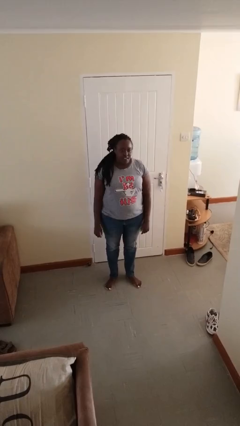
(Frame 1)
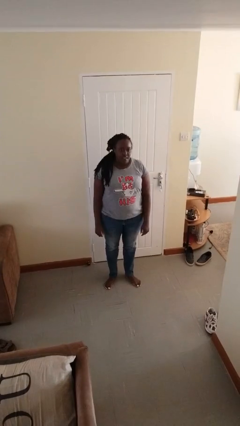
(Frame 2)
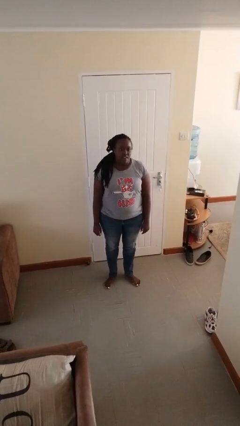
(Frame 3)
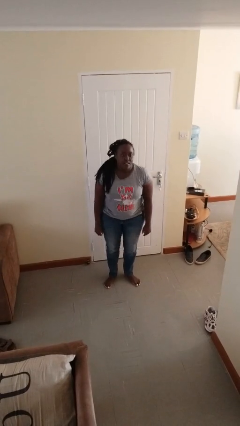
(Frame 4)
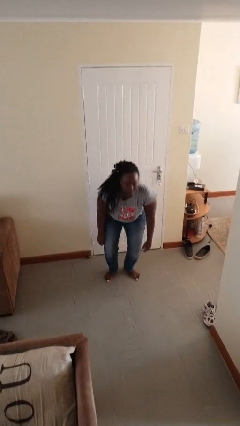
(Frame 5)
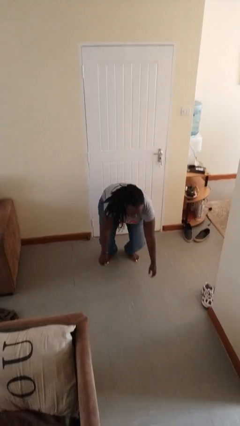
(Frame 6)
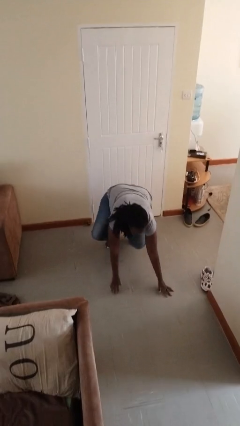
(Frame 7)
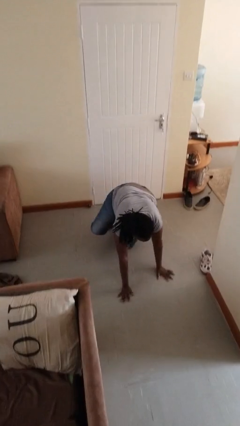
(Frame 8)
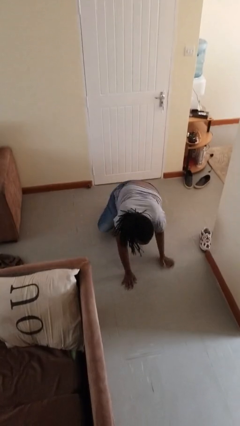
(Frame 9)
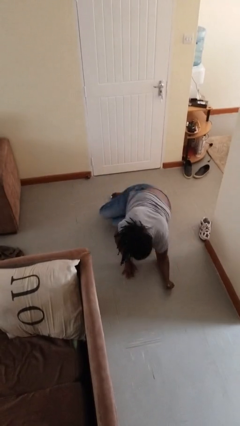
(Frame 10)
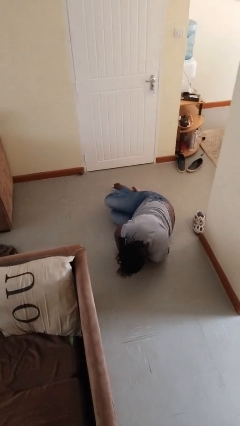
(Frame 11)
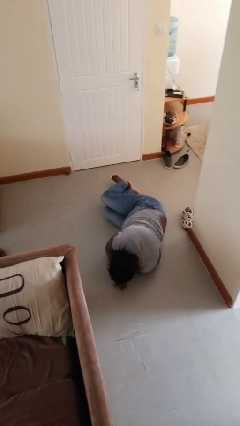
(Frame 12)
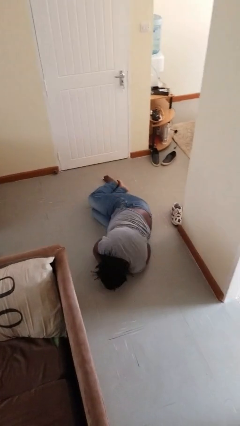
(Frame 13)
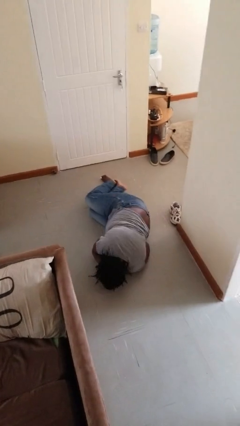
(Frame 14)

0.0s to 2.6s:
person falls while standing

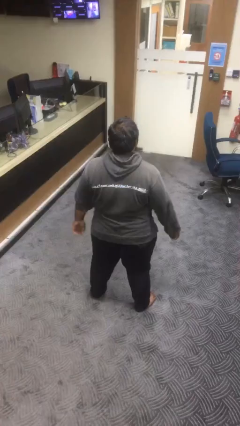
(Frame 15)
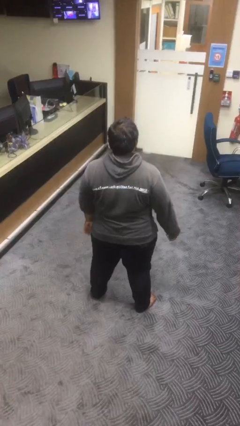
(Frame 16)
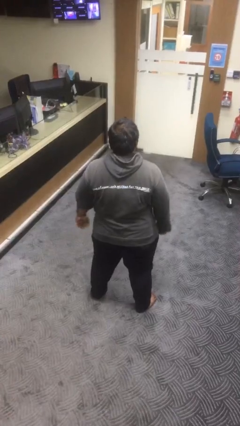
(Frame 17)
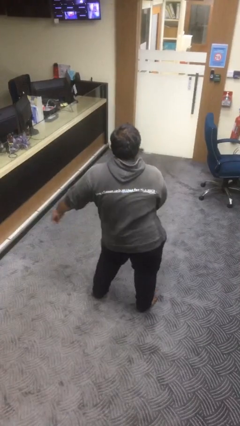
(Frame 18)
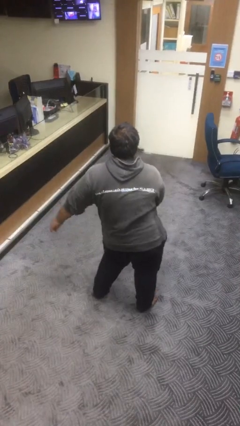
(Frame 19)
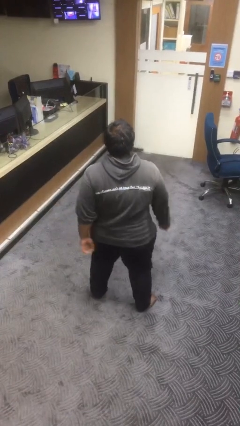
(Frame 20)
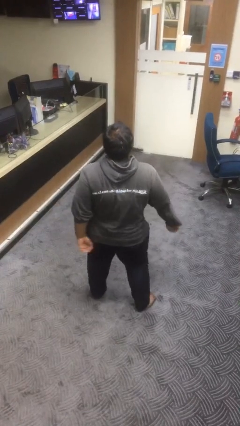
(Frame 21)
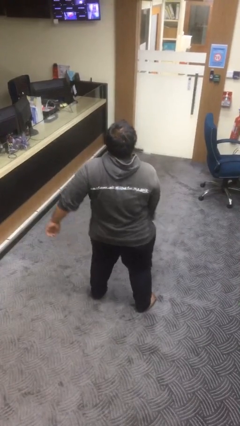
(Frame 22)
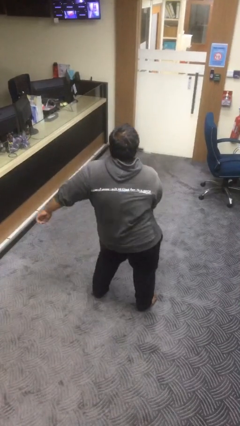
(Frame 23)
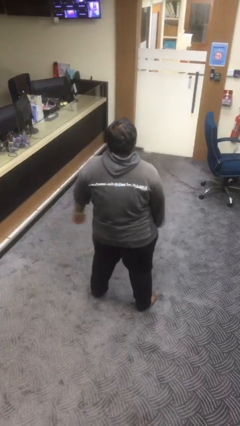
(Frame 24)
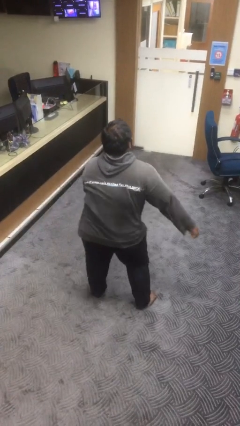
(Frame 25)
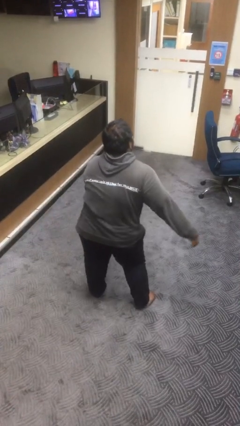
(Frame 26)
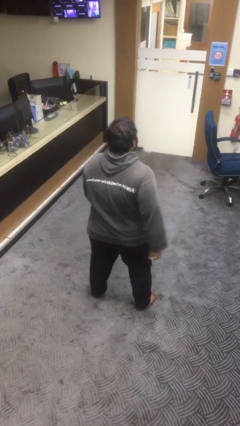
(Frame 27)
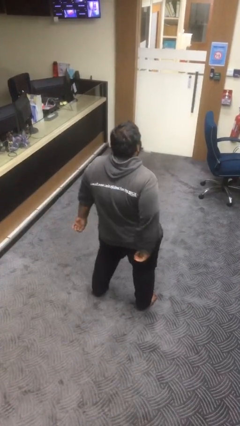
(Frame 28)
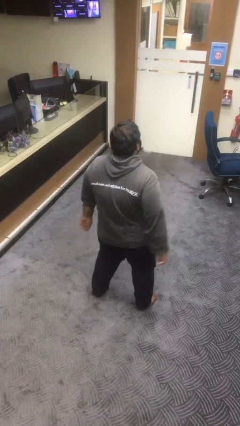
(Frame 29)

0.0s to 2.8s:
person dances in place

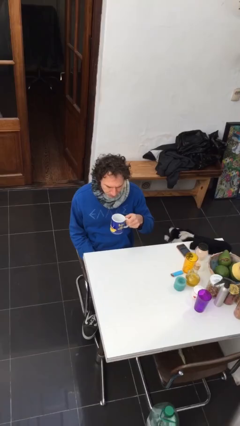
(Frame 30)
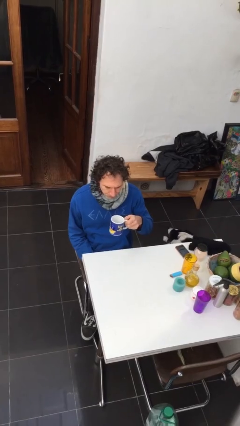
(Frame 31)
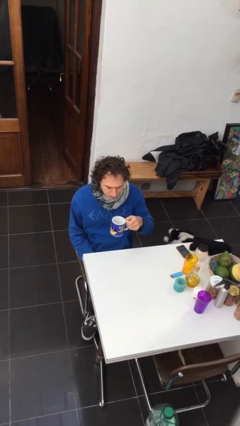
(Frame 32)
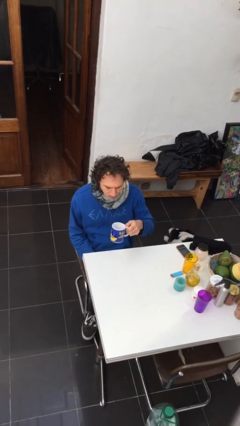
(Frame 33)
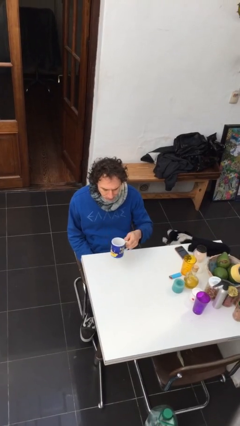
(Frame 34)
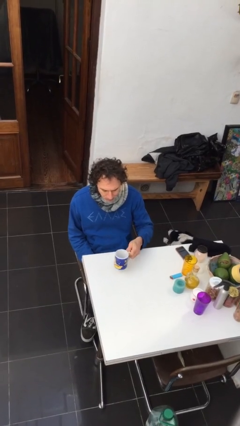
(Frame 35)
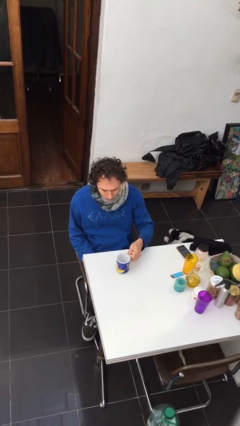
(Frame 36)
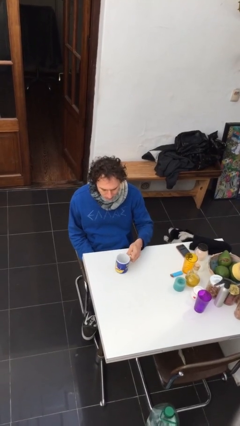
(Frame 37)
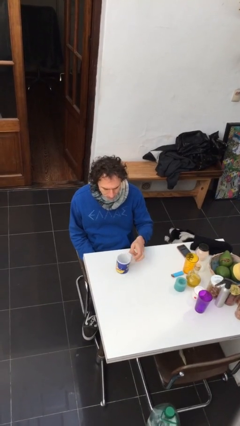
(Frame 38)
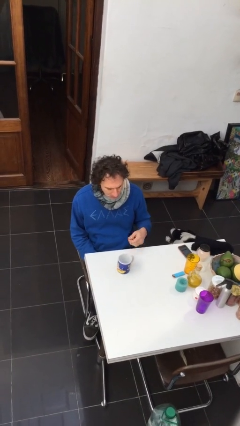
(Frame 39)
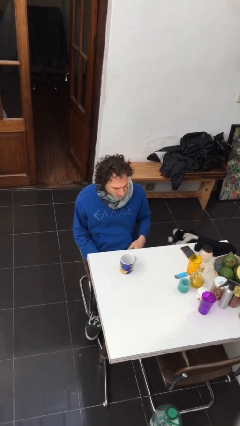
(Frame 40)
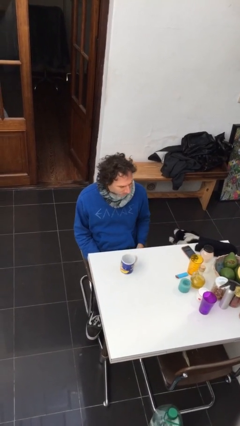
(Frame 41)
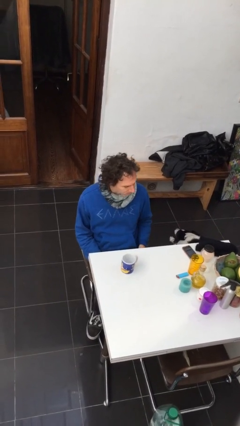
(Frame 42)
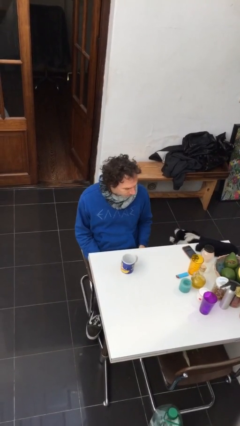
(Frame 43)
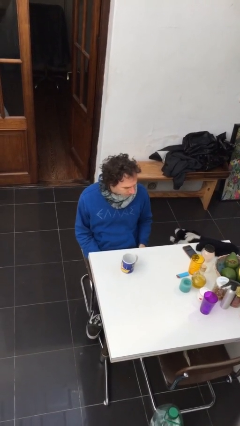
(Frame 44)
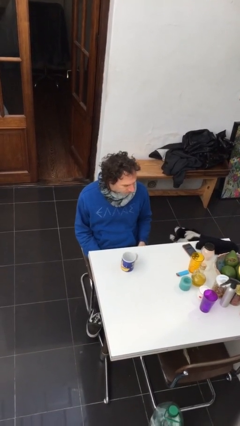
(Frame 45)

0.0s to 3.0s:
person puts down object on table

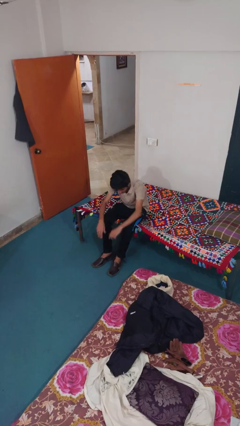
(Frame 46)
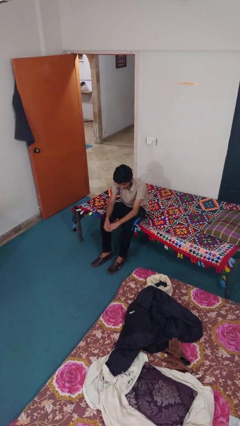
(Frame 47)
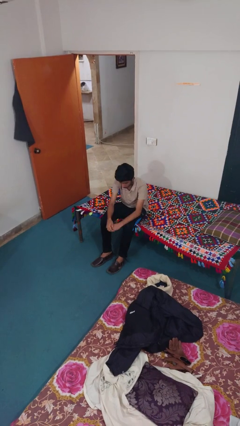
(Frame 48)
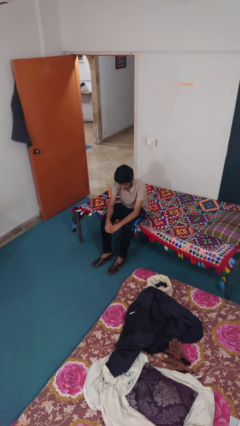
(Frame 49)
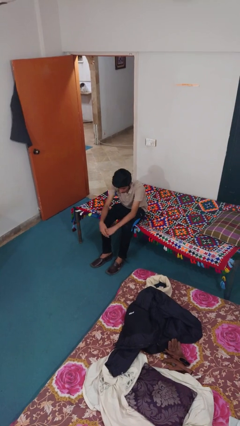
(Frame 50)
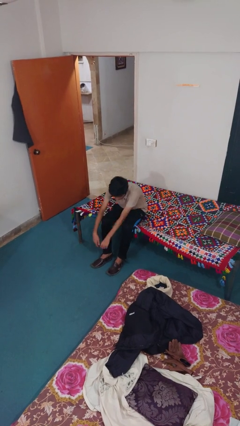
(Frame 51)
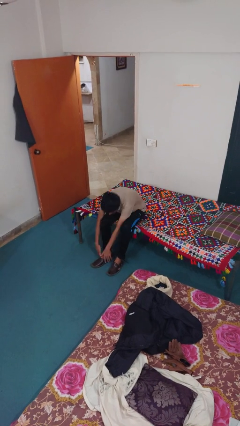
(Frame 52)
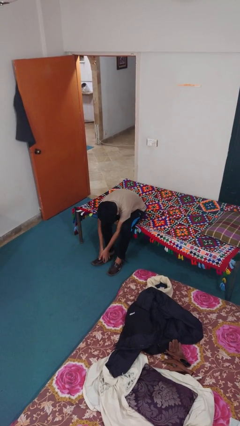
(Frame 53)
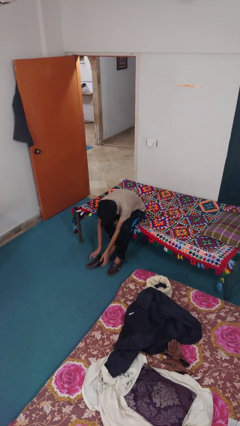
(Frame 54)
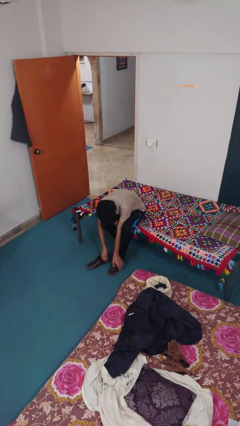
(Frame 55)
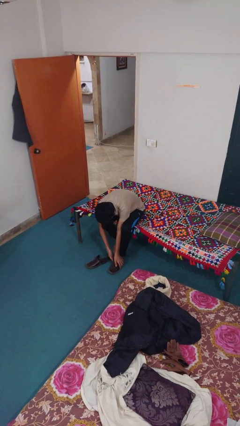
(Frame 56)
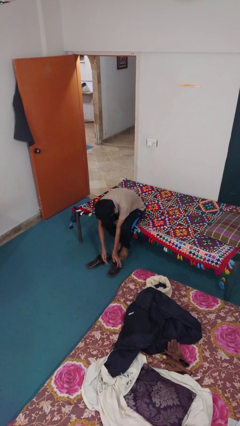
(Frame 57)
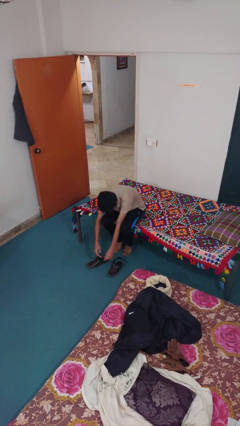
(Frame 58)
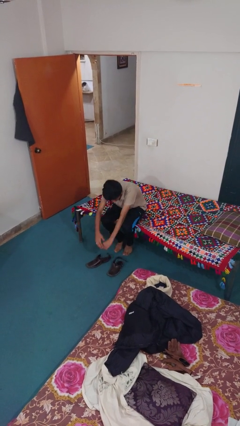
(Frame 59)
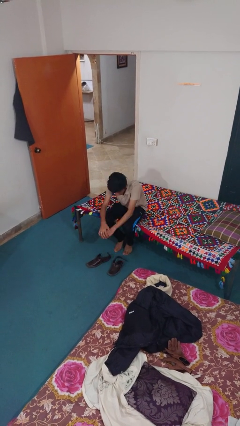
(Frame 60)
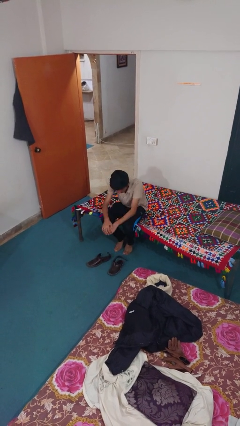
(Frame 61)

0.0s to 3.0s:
person takes off shoes

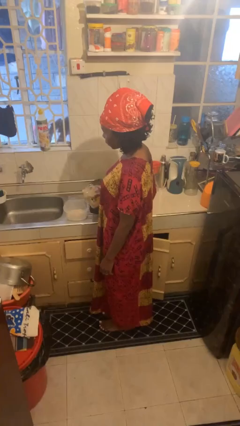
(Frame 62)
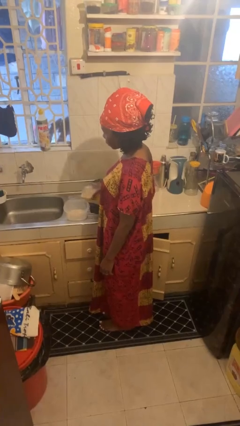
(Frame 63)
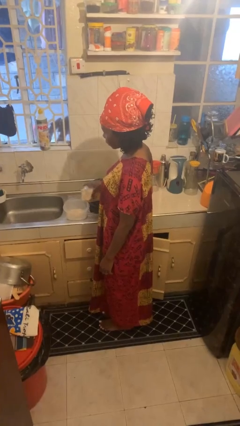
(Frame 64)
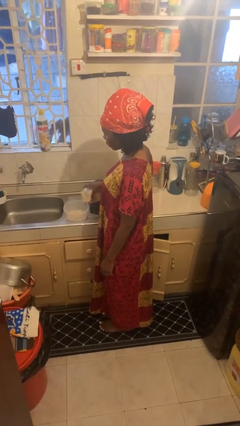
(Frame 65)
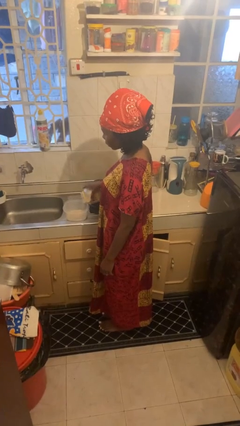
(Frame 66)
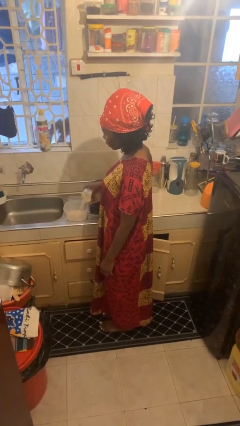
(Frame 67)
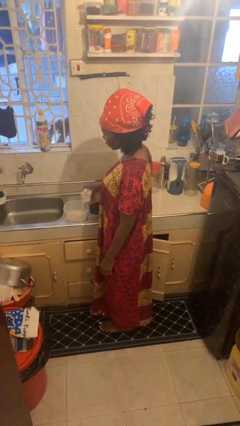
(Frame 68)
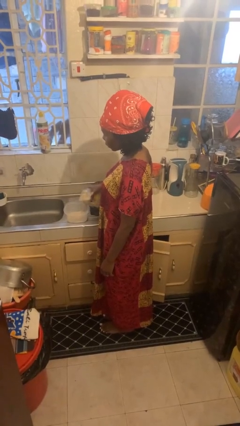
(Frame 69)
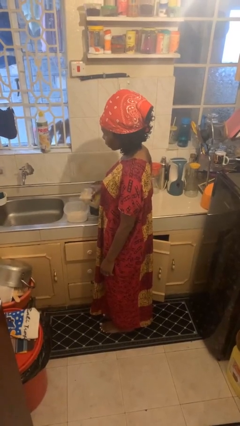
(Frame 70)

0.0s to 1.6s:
person pours into bowl

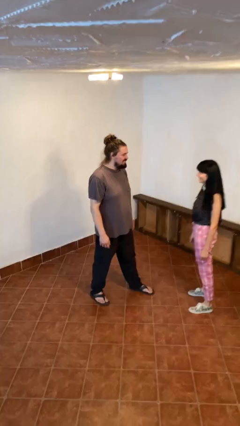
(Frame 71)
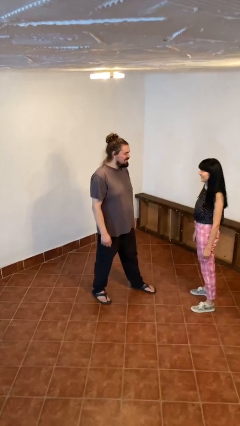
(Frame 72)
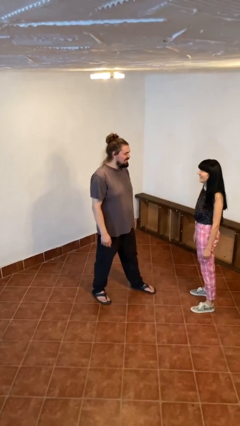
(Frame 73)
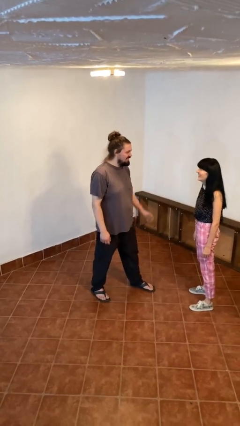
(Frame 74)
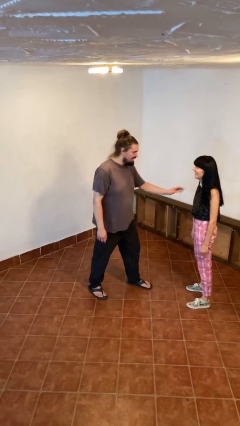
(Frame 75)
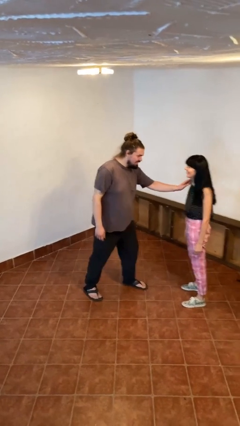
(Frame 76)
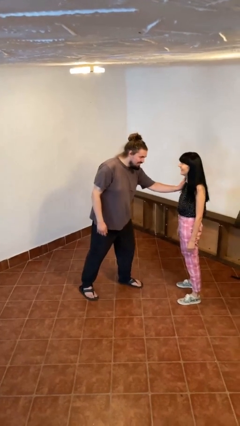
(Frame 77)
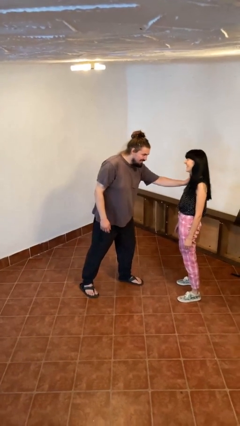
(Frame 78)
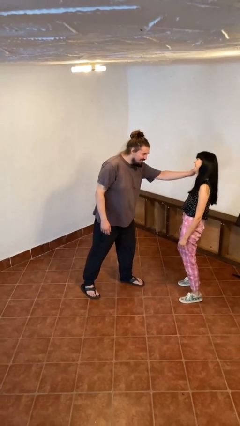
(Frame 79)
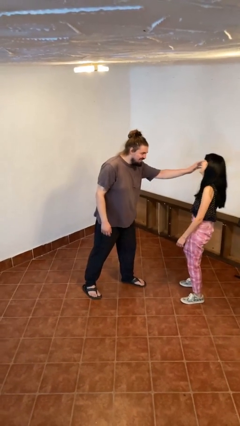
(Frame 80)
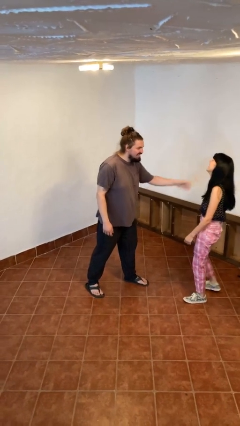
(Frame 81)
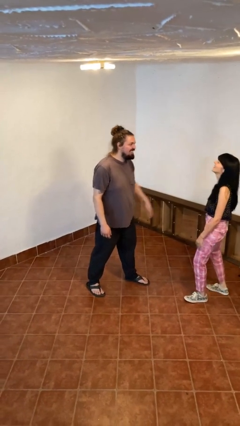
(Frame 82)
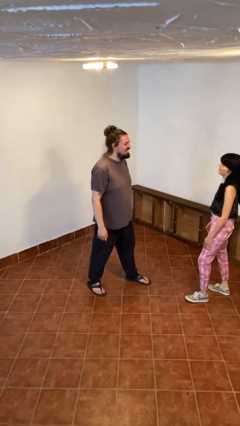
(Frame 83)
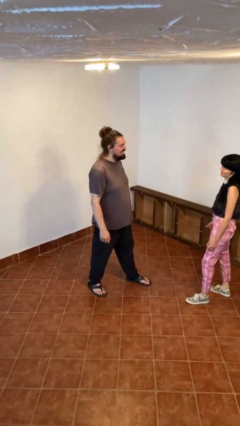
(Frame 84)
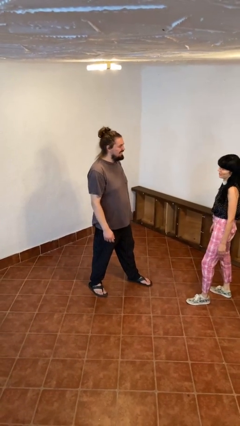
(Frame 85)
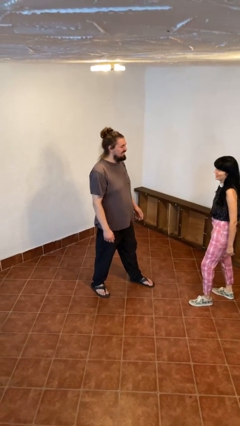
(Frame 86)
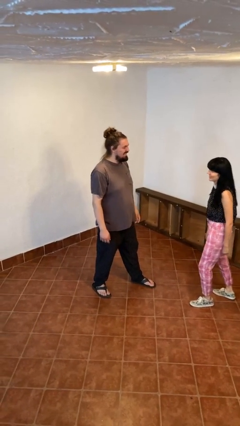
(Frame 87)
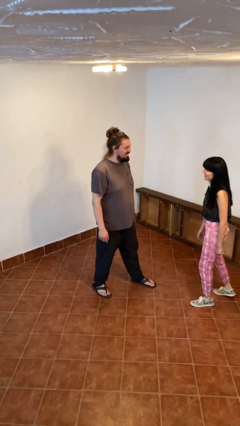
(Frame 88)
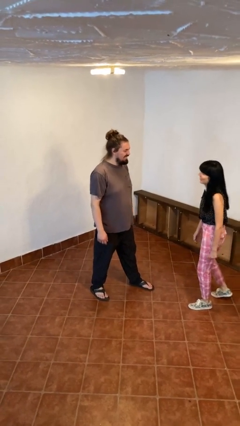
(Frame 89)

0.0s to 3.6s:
person shoves person

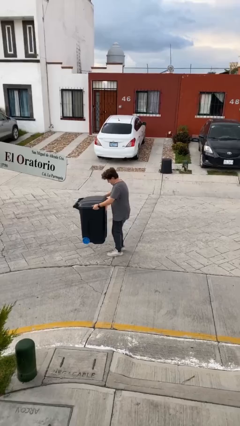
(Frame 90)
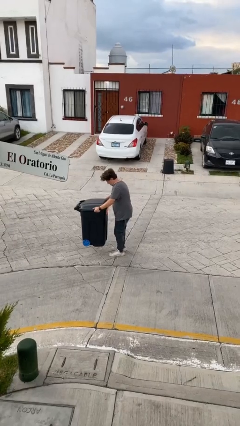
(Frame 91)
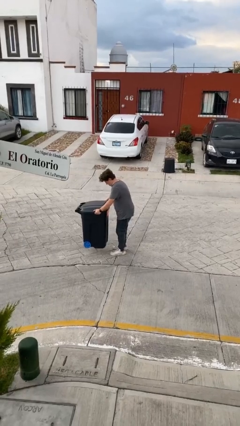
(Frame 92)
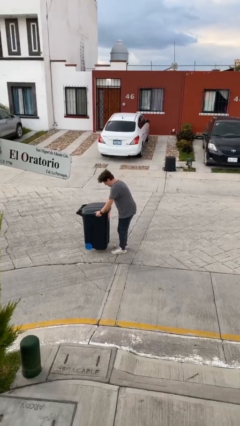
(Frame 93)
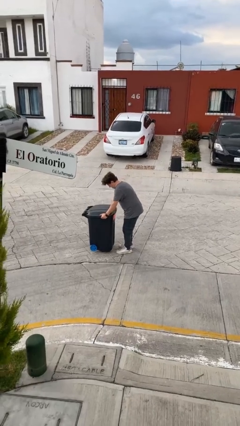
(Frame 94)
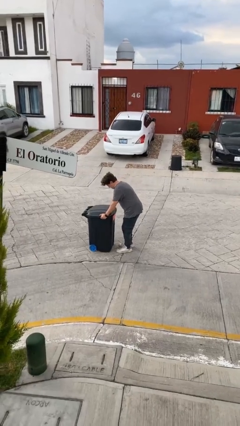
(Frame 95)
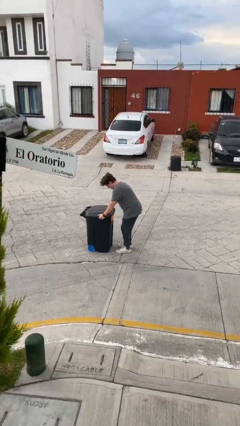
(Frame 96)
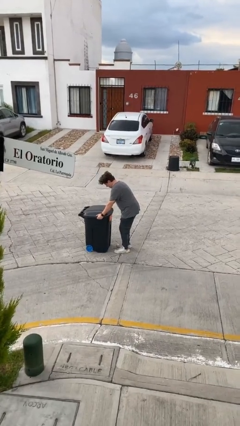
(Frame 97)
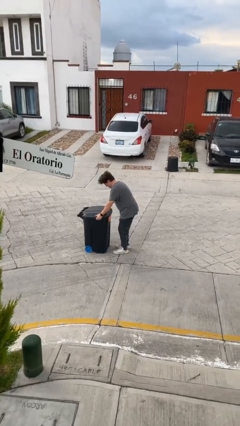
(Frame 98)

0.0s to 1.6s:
person puts down object on floor
